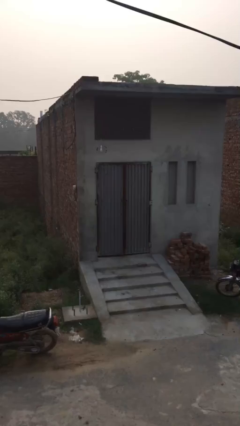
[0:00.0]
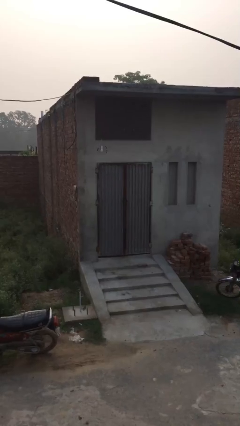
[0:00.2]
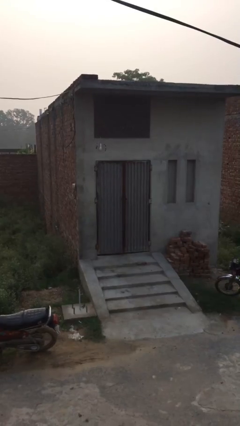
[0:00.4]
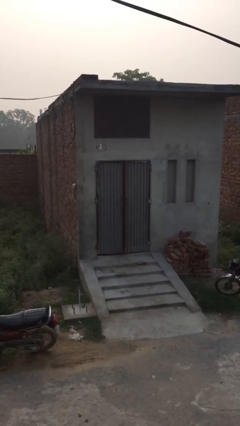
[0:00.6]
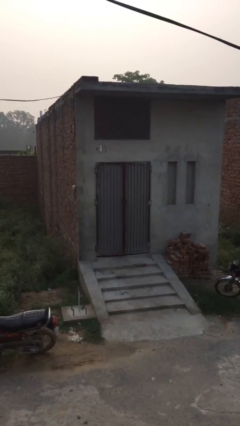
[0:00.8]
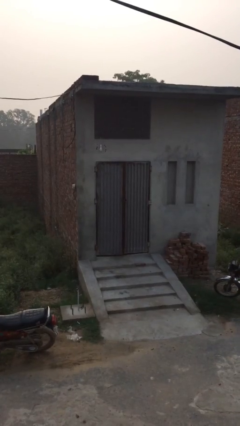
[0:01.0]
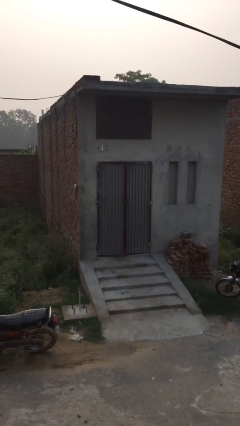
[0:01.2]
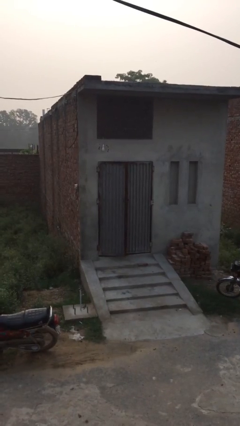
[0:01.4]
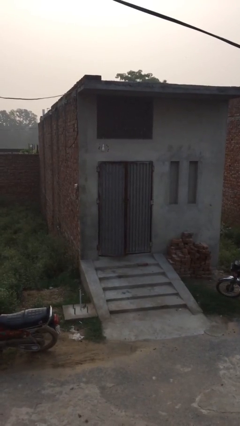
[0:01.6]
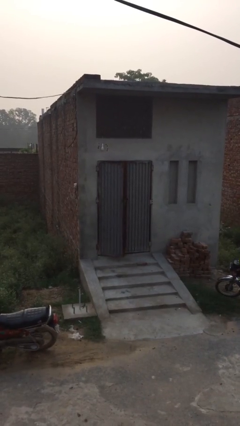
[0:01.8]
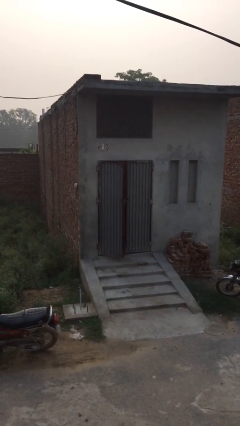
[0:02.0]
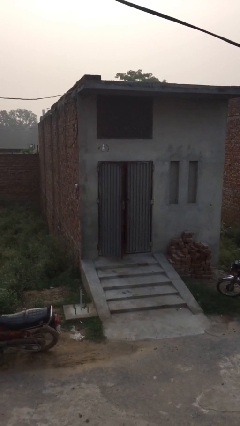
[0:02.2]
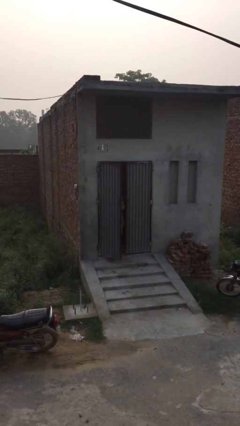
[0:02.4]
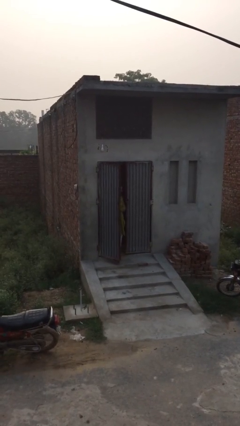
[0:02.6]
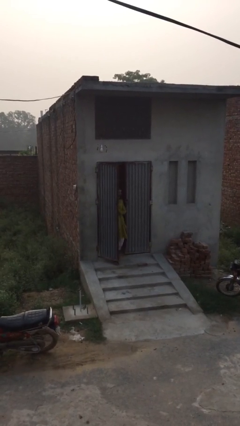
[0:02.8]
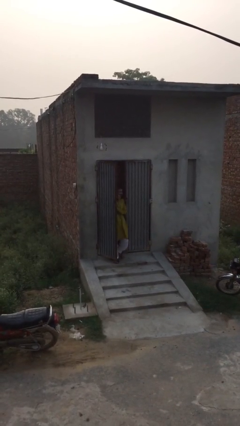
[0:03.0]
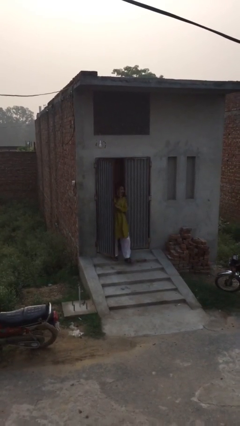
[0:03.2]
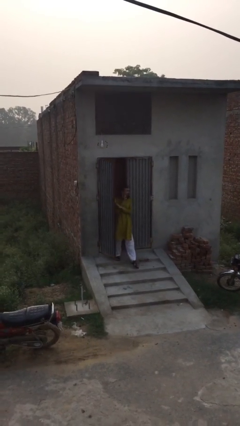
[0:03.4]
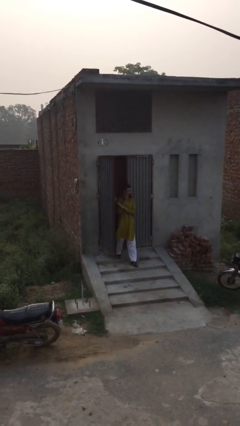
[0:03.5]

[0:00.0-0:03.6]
person opens facility door

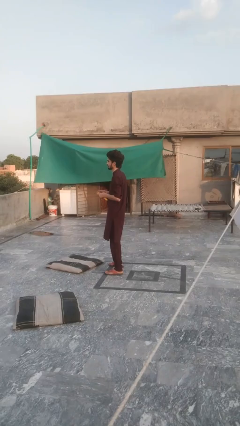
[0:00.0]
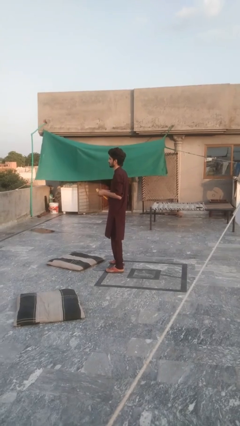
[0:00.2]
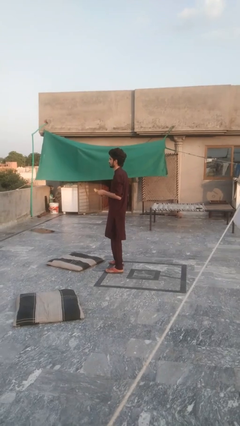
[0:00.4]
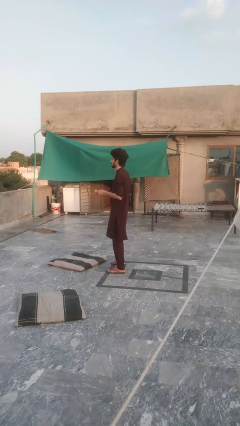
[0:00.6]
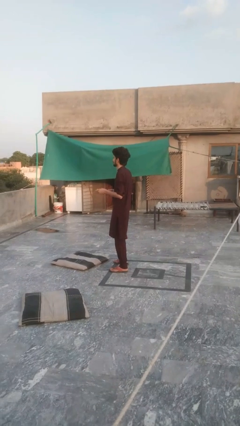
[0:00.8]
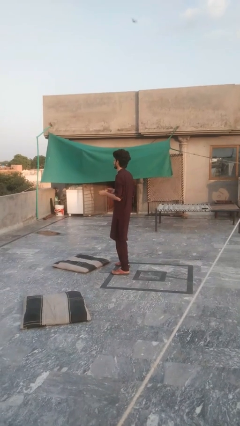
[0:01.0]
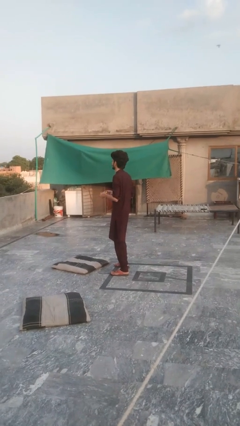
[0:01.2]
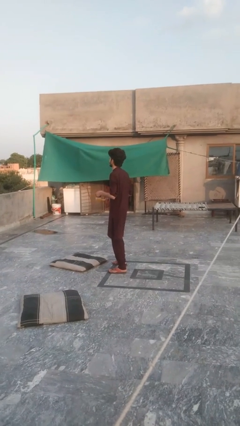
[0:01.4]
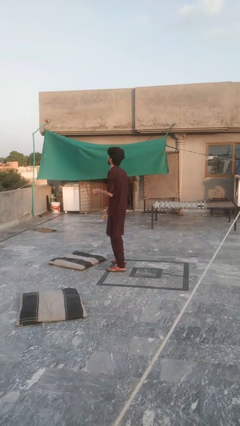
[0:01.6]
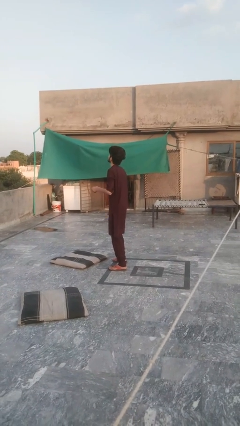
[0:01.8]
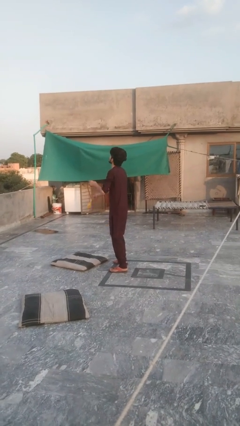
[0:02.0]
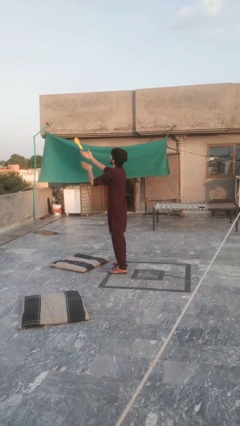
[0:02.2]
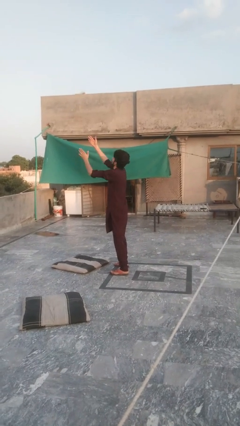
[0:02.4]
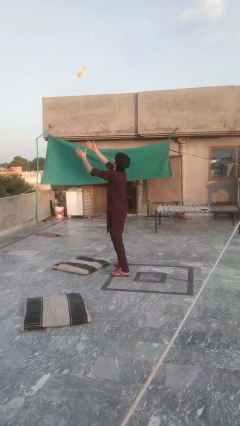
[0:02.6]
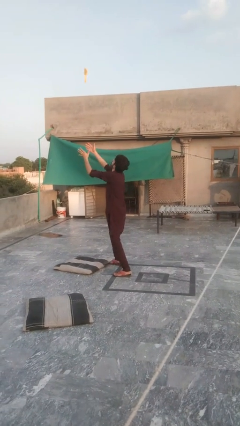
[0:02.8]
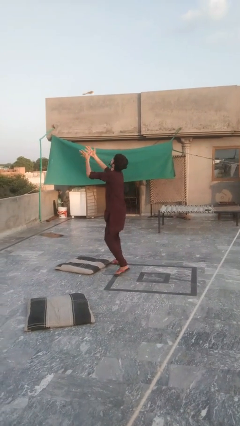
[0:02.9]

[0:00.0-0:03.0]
person drops object

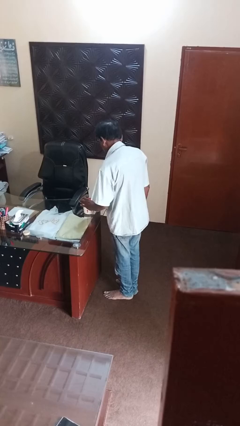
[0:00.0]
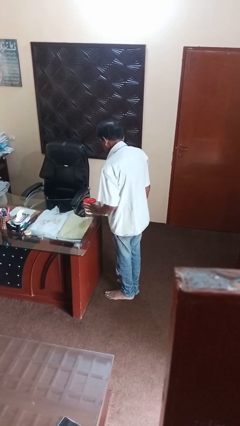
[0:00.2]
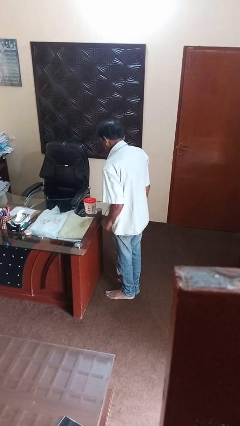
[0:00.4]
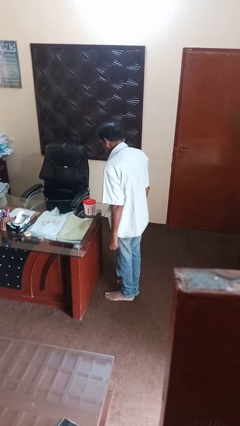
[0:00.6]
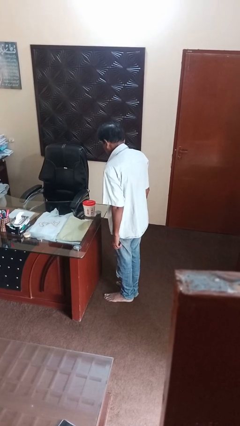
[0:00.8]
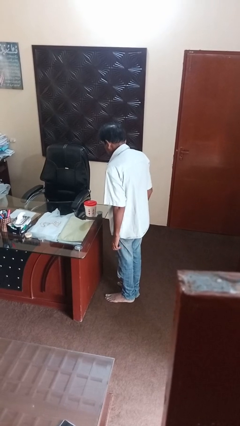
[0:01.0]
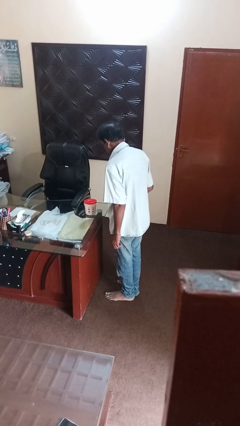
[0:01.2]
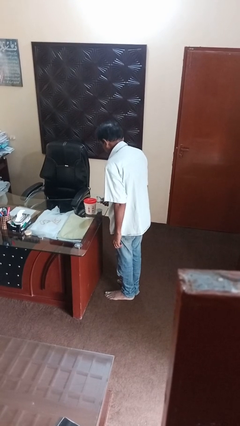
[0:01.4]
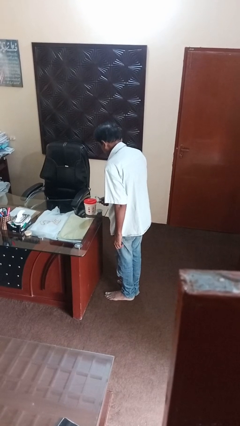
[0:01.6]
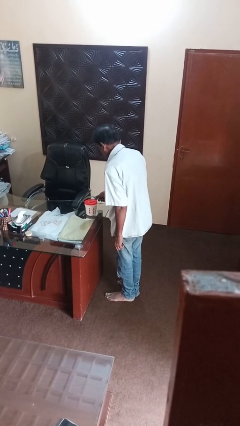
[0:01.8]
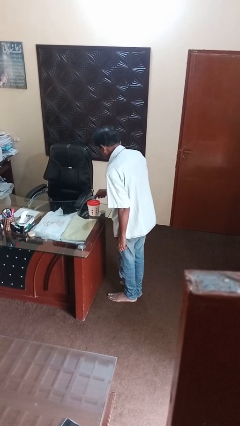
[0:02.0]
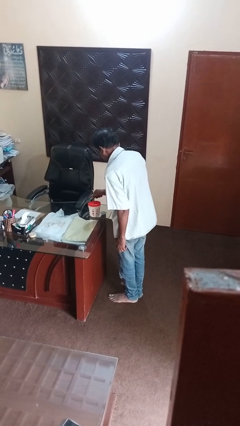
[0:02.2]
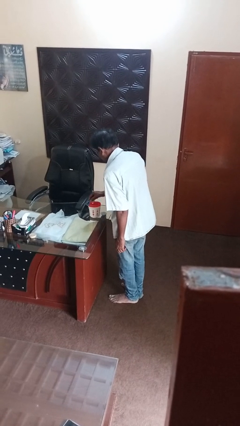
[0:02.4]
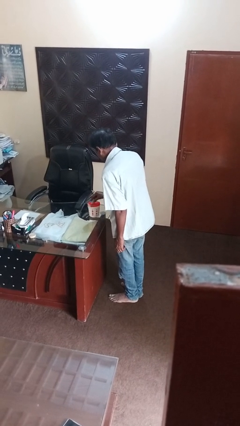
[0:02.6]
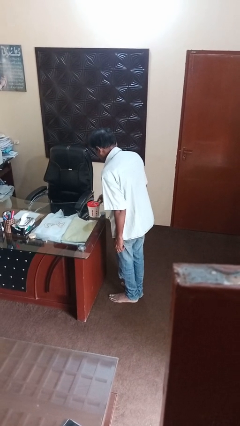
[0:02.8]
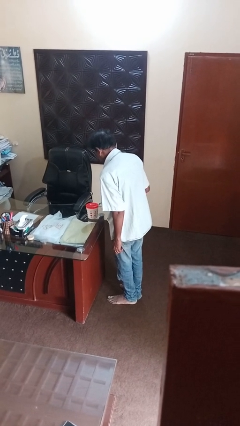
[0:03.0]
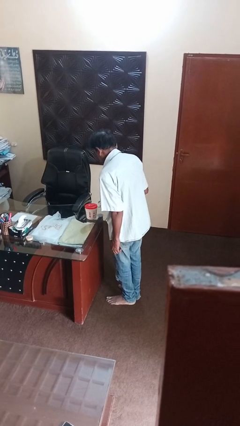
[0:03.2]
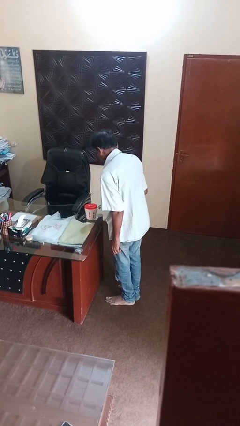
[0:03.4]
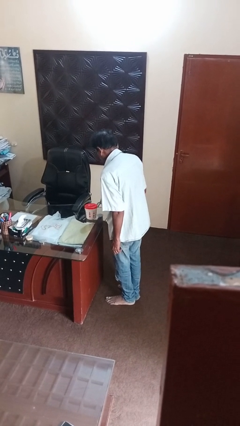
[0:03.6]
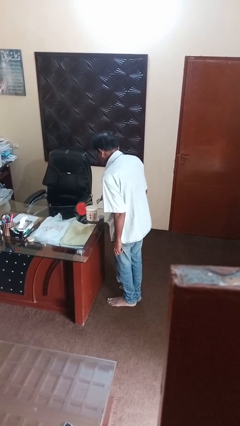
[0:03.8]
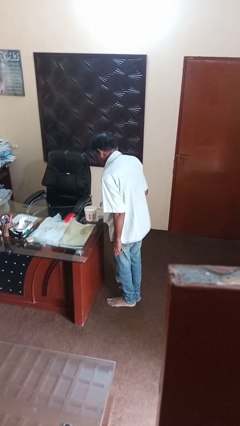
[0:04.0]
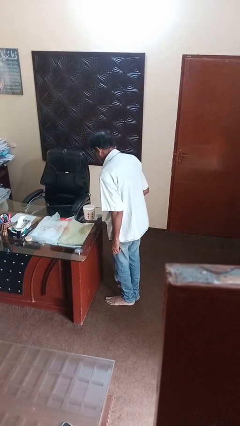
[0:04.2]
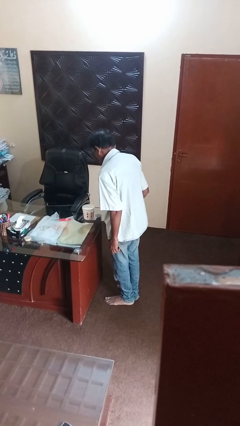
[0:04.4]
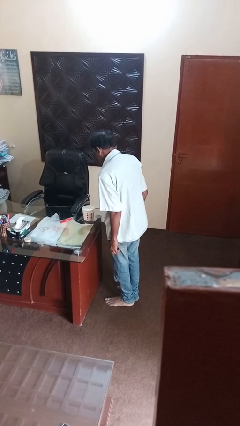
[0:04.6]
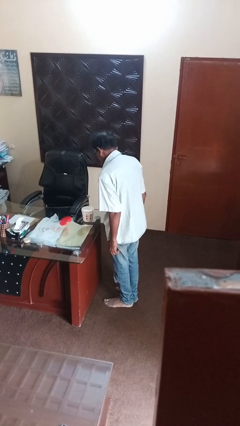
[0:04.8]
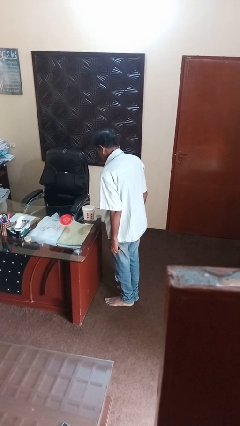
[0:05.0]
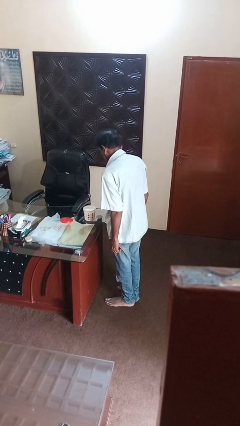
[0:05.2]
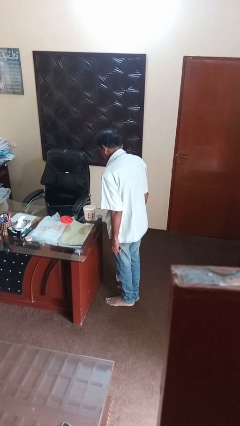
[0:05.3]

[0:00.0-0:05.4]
person opens can with can opener

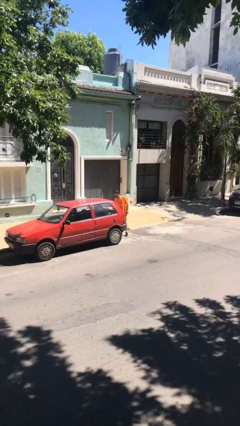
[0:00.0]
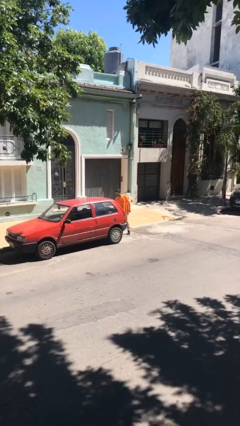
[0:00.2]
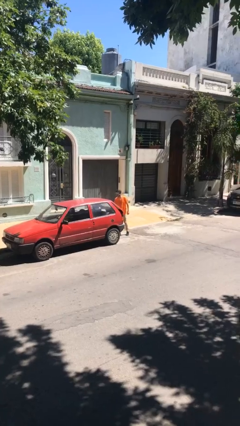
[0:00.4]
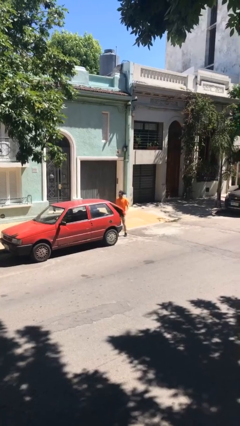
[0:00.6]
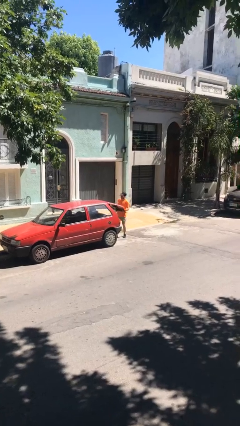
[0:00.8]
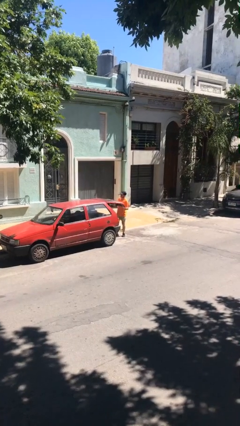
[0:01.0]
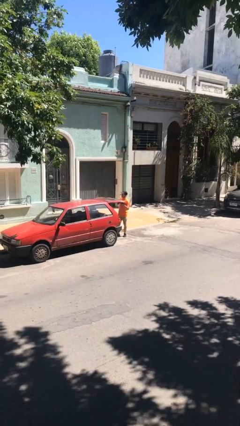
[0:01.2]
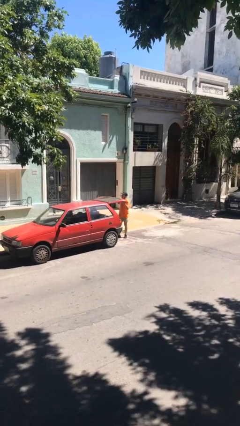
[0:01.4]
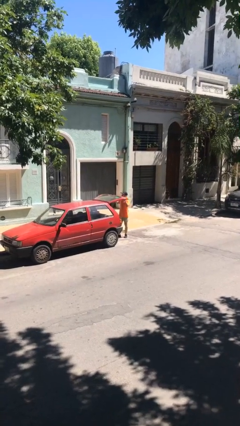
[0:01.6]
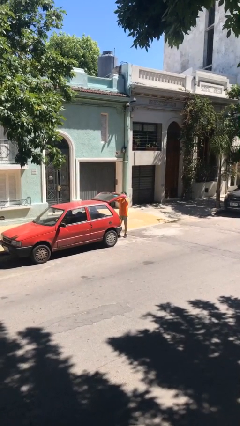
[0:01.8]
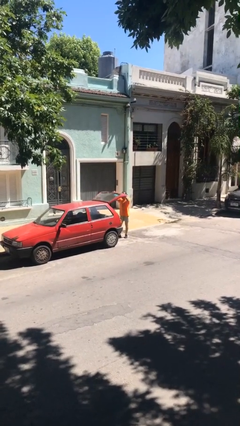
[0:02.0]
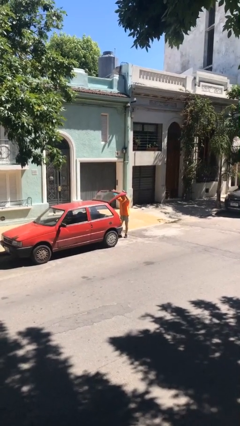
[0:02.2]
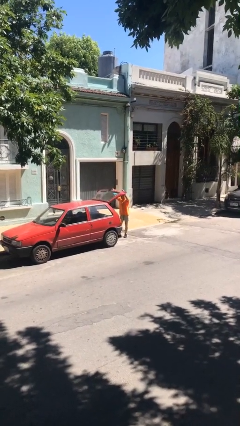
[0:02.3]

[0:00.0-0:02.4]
person opens car trunk

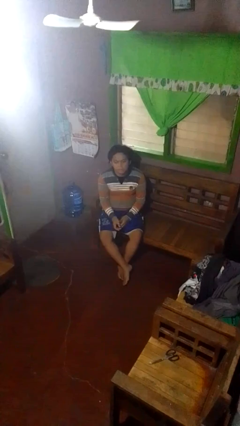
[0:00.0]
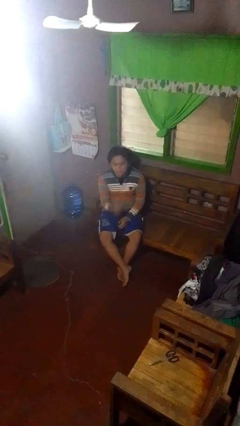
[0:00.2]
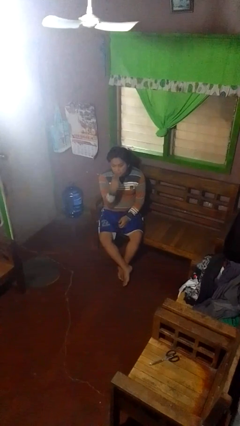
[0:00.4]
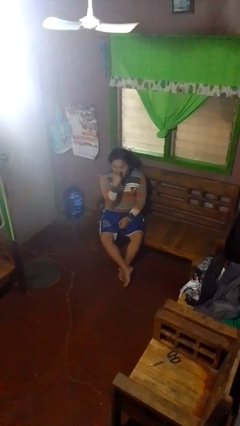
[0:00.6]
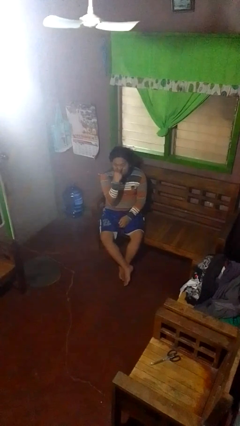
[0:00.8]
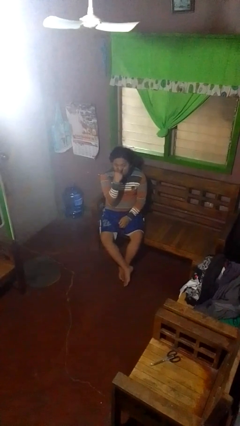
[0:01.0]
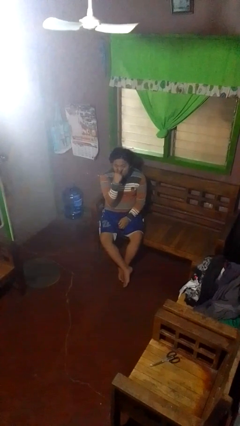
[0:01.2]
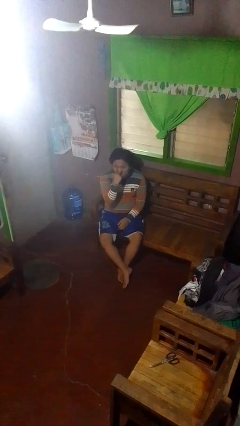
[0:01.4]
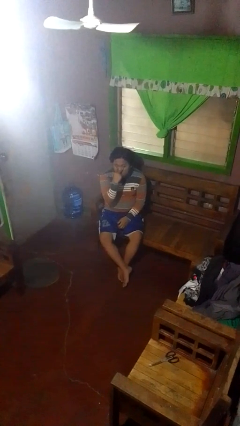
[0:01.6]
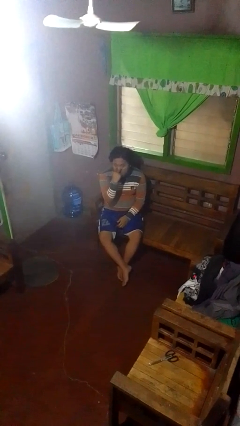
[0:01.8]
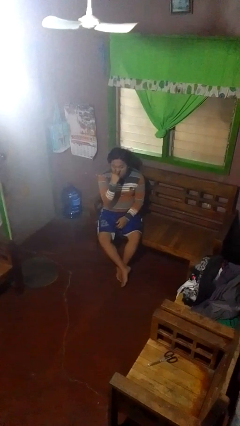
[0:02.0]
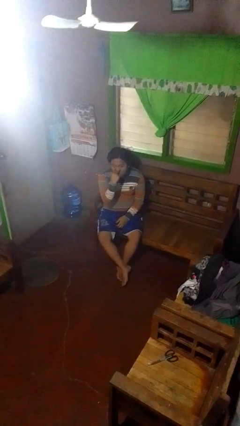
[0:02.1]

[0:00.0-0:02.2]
person gestures watch closely

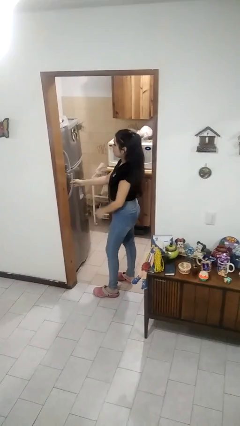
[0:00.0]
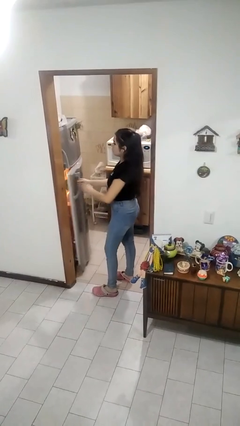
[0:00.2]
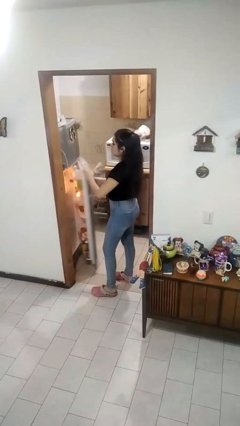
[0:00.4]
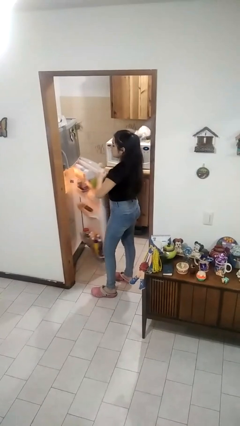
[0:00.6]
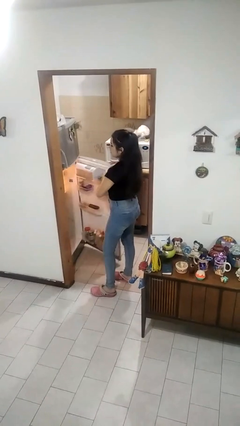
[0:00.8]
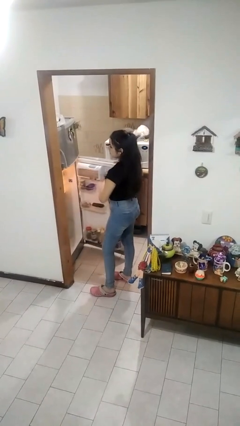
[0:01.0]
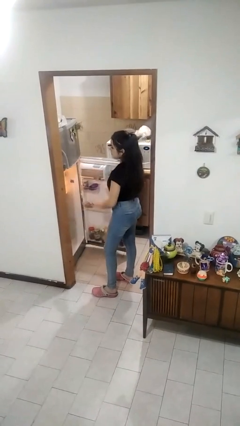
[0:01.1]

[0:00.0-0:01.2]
person opens refrigerator
